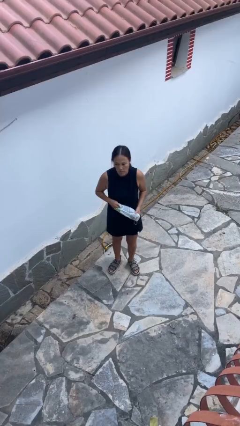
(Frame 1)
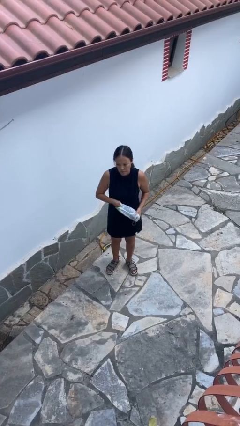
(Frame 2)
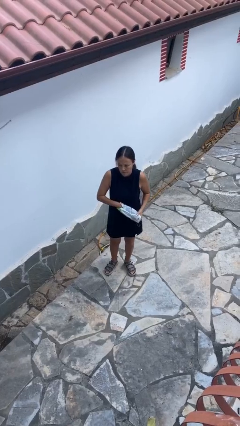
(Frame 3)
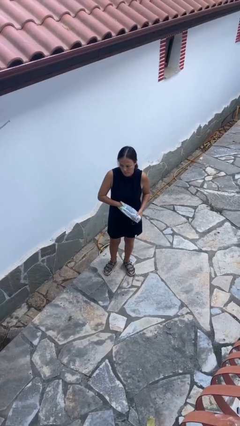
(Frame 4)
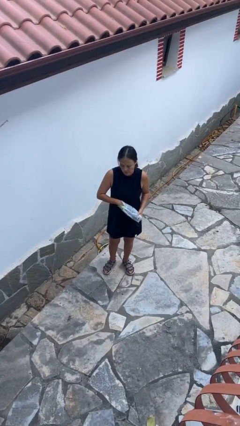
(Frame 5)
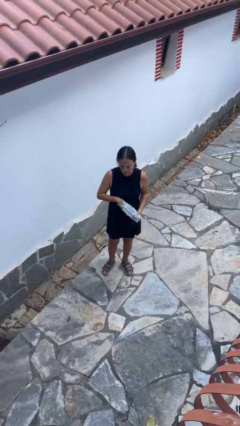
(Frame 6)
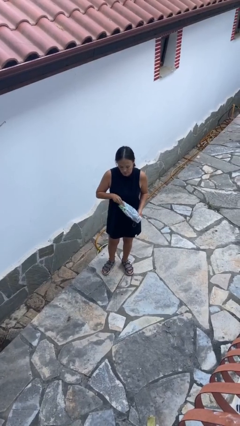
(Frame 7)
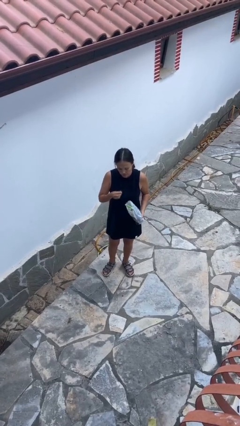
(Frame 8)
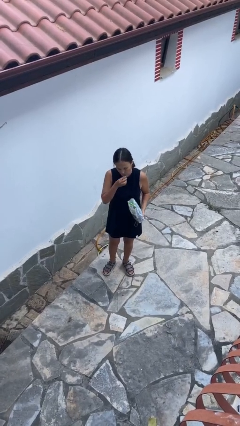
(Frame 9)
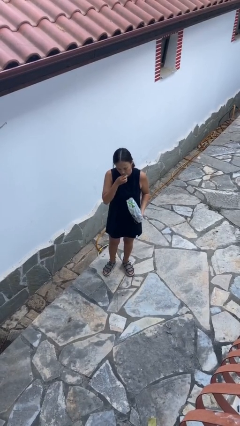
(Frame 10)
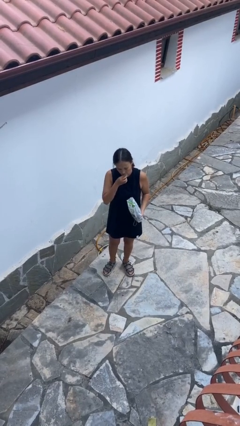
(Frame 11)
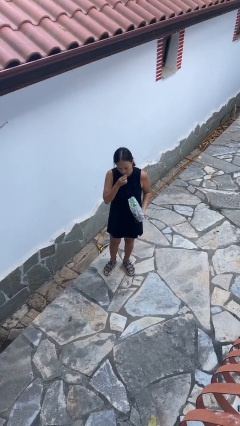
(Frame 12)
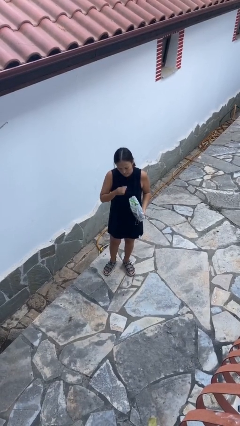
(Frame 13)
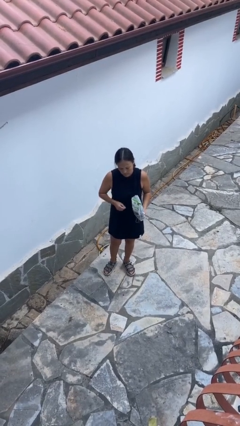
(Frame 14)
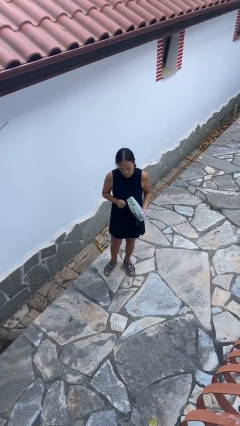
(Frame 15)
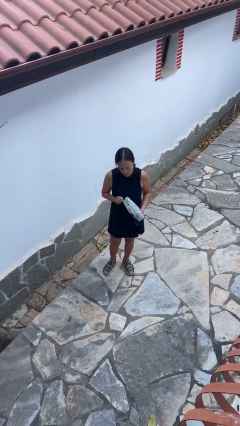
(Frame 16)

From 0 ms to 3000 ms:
person eats snack from bag

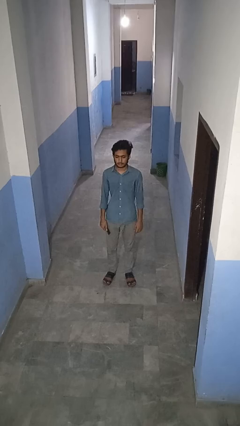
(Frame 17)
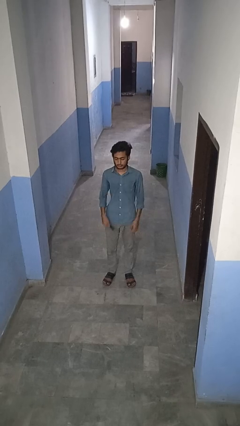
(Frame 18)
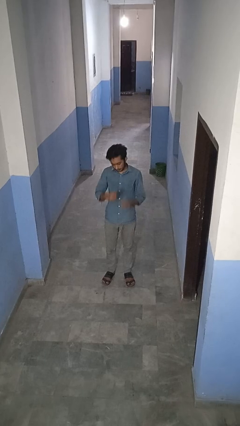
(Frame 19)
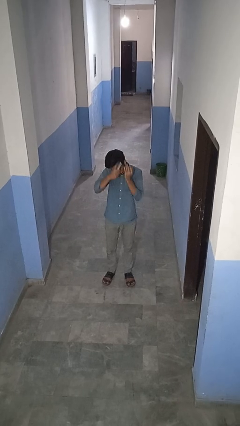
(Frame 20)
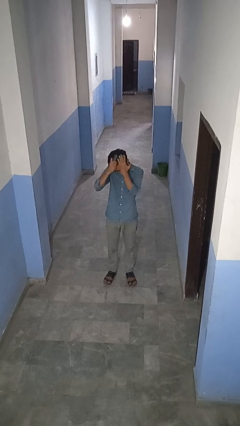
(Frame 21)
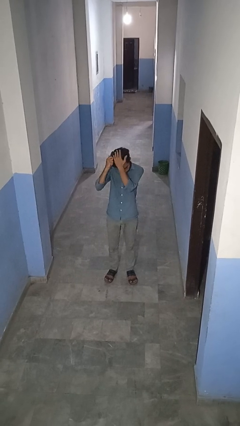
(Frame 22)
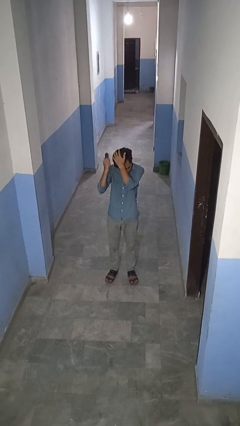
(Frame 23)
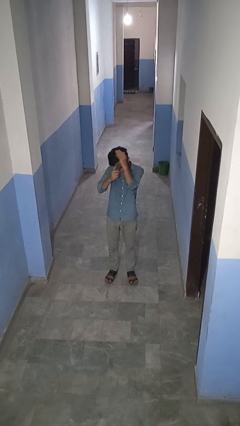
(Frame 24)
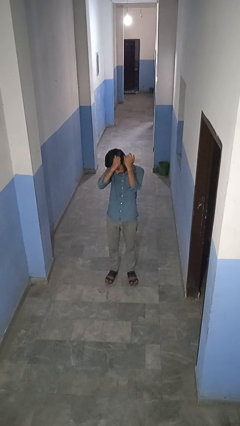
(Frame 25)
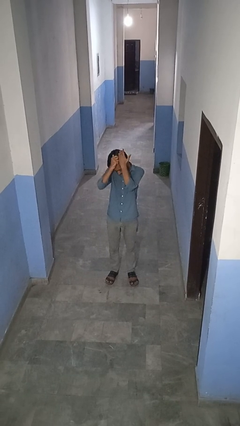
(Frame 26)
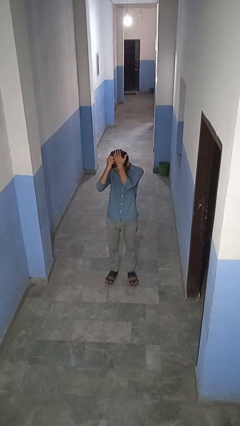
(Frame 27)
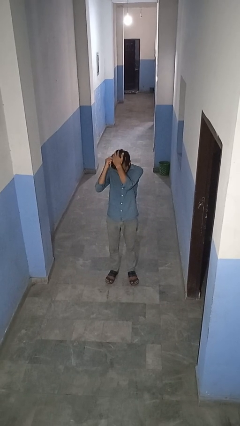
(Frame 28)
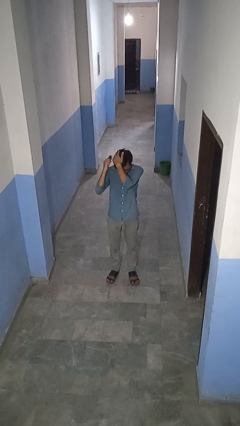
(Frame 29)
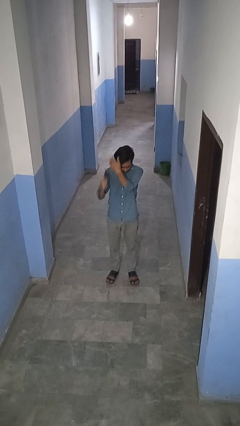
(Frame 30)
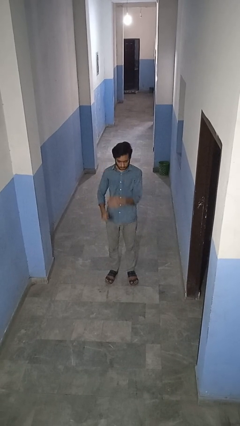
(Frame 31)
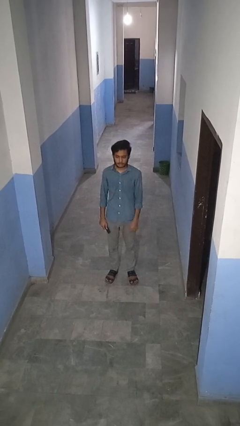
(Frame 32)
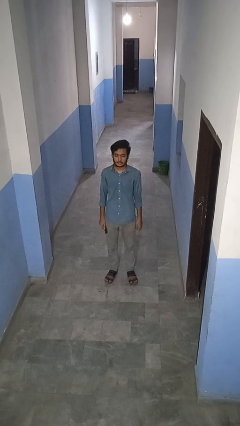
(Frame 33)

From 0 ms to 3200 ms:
person brushes hair

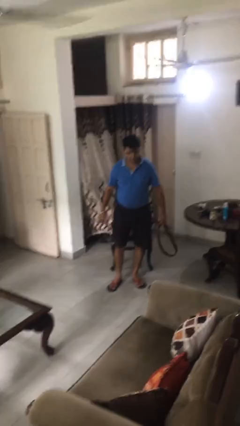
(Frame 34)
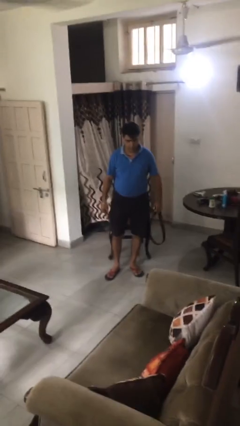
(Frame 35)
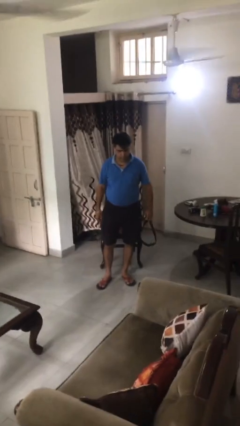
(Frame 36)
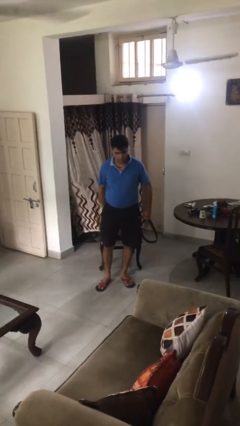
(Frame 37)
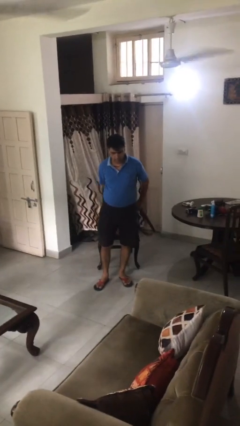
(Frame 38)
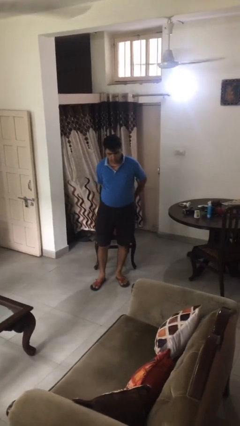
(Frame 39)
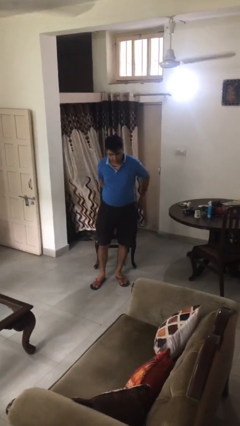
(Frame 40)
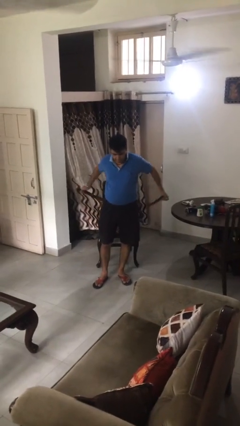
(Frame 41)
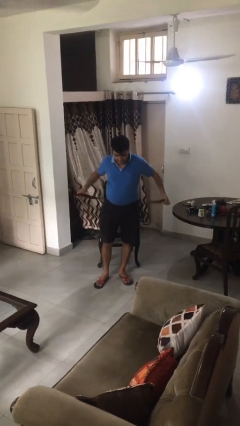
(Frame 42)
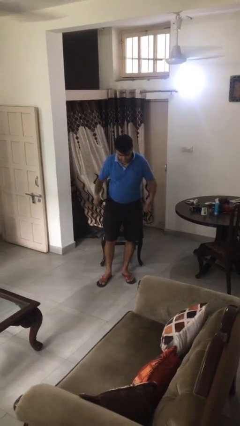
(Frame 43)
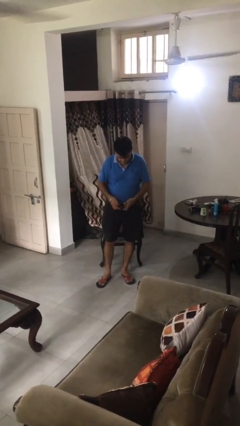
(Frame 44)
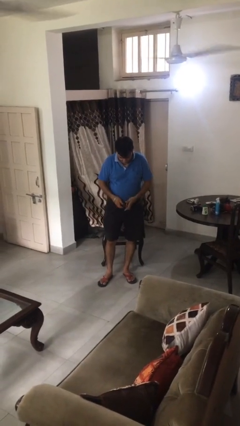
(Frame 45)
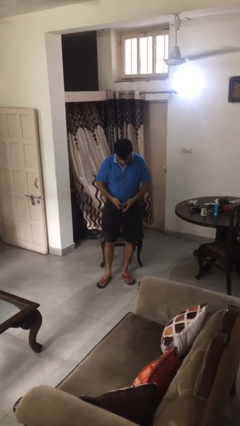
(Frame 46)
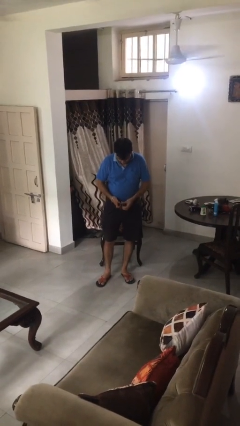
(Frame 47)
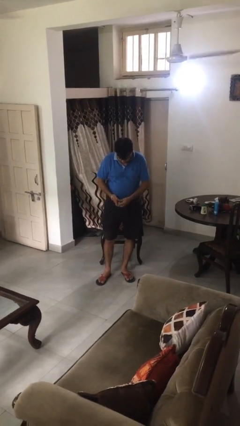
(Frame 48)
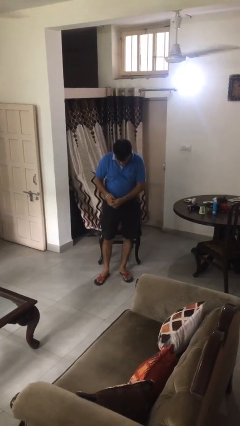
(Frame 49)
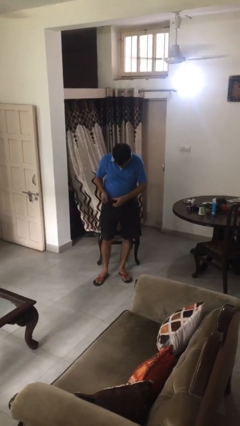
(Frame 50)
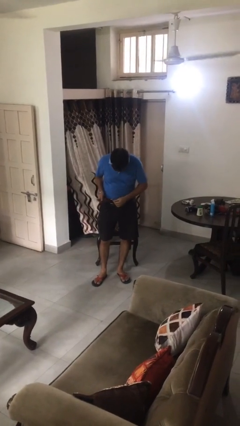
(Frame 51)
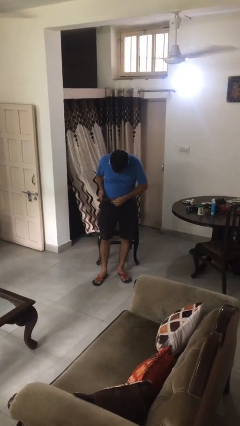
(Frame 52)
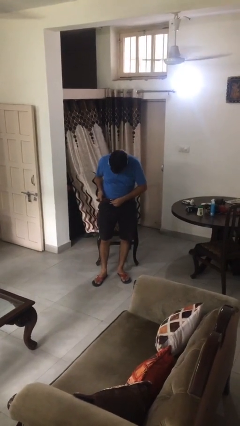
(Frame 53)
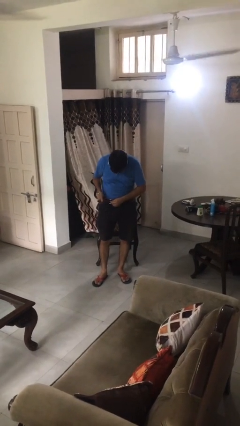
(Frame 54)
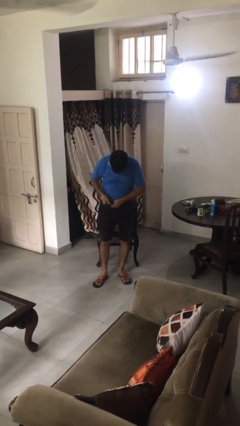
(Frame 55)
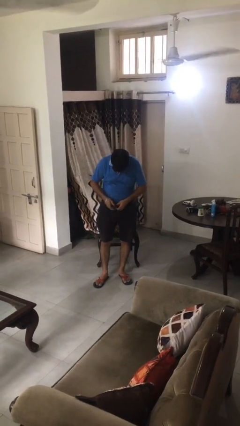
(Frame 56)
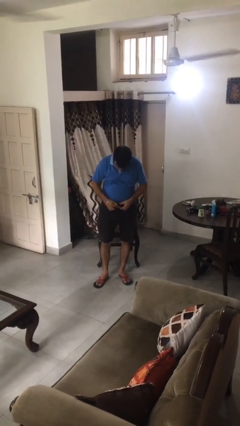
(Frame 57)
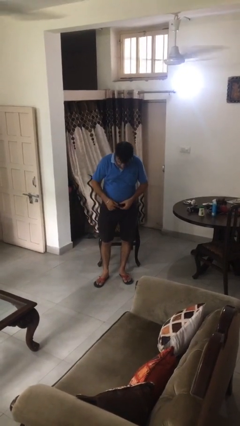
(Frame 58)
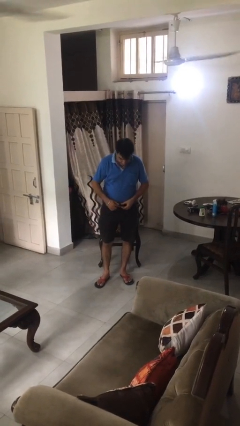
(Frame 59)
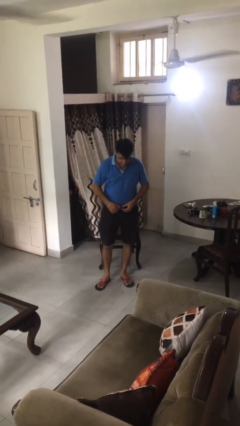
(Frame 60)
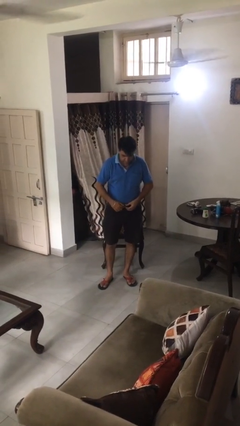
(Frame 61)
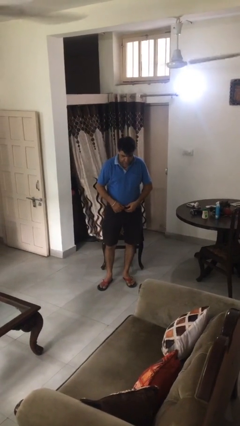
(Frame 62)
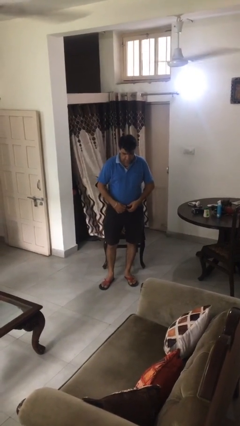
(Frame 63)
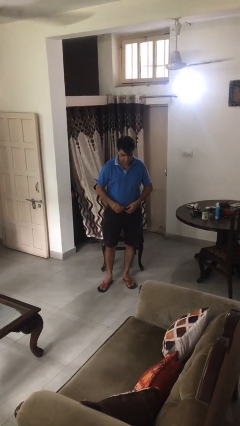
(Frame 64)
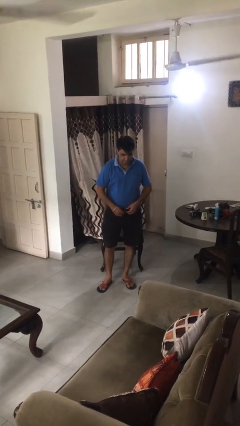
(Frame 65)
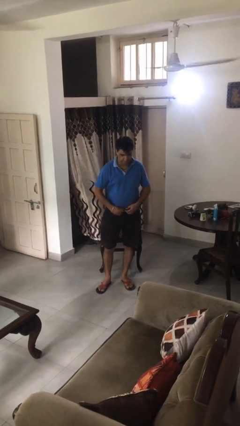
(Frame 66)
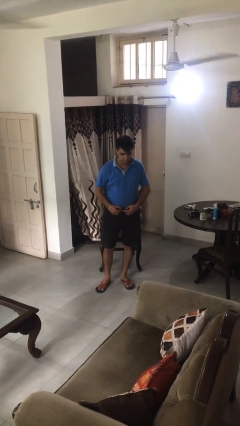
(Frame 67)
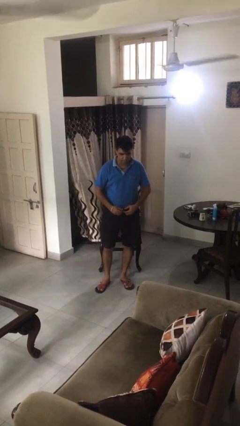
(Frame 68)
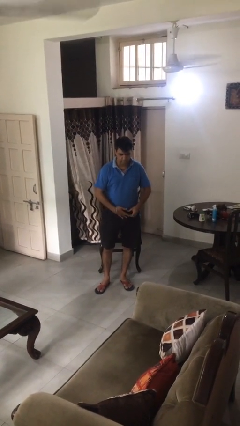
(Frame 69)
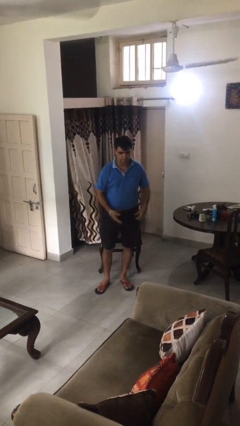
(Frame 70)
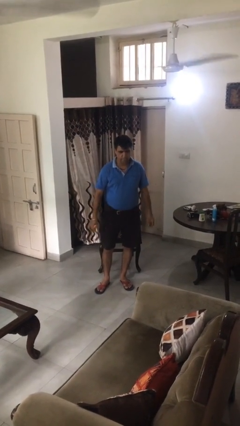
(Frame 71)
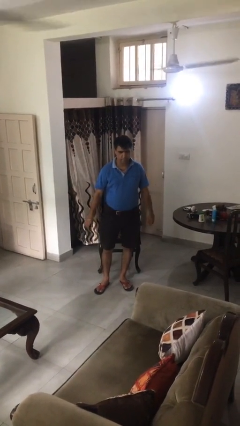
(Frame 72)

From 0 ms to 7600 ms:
person puts on belt

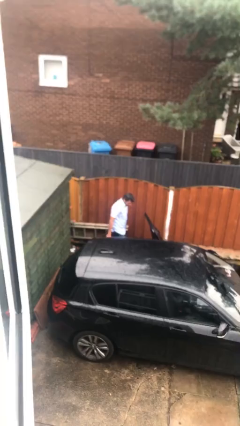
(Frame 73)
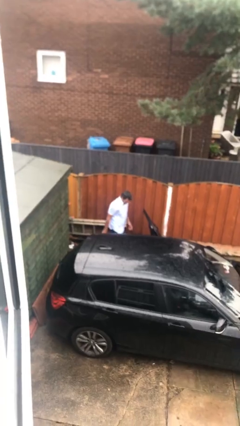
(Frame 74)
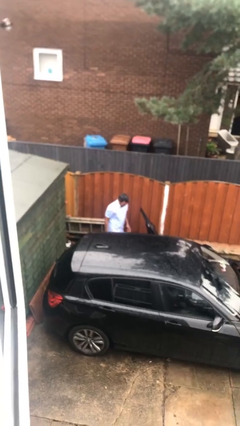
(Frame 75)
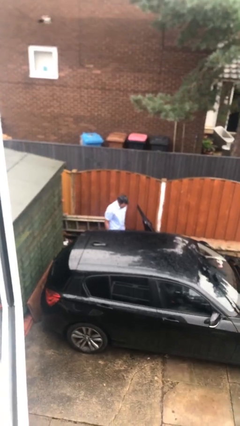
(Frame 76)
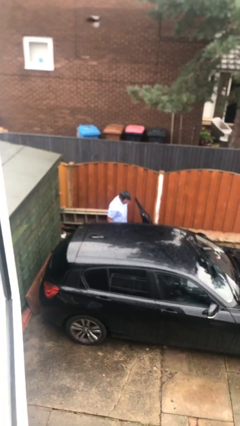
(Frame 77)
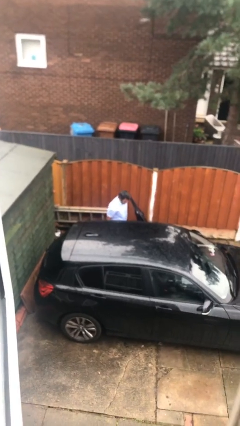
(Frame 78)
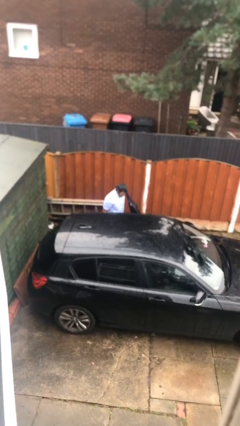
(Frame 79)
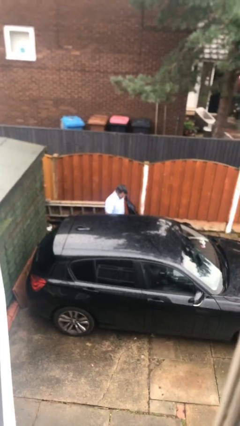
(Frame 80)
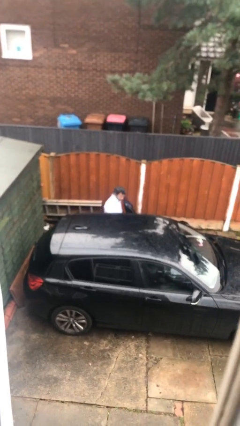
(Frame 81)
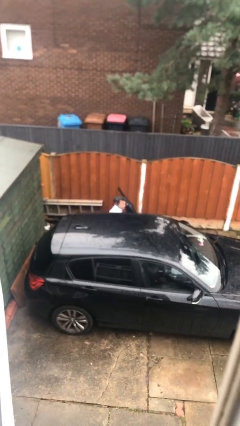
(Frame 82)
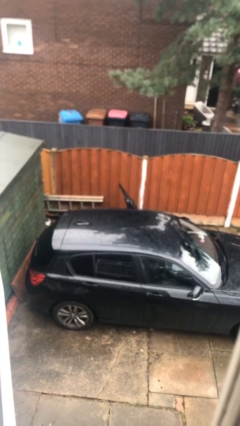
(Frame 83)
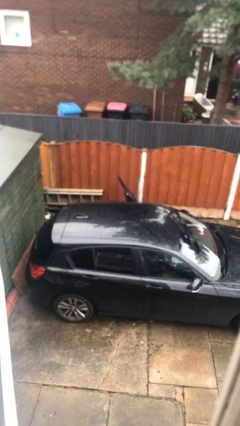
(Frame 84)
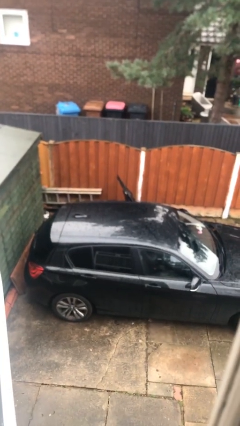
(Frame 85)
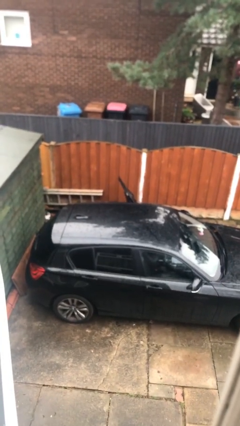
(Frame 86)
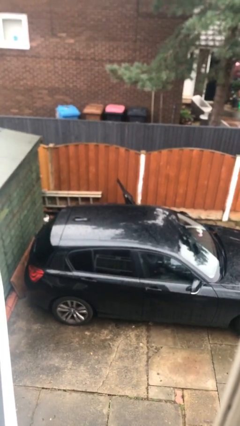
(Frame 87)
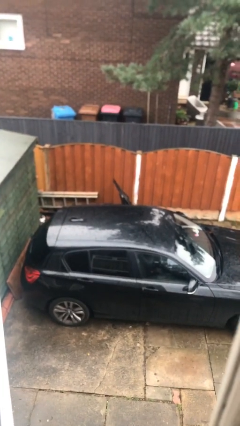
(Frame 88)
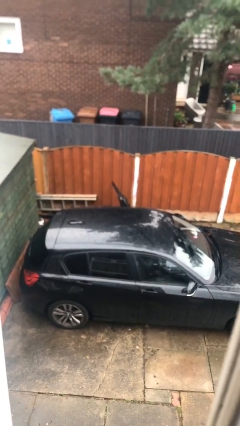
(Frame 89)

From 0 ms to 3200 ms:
person enters car

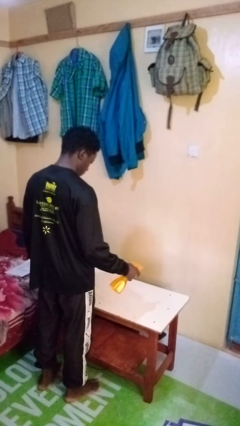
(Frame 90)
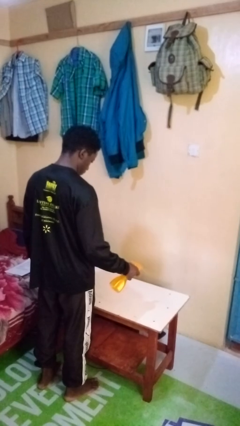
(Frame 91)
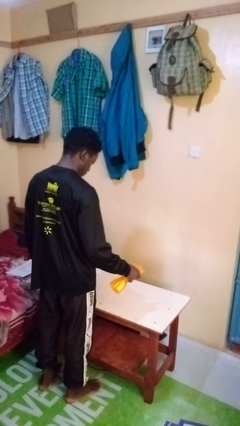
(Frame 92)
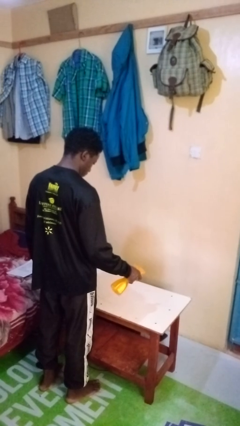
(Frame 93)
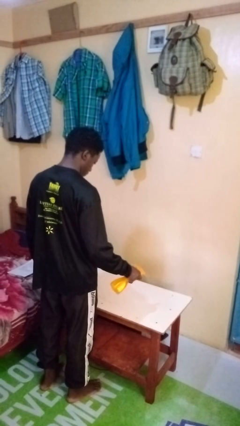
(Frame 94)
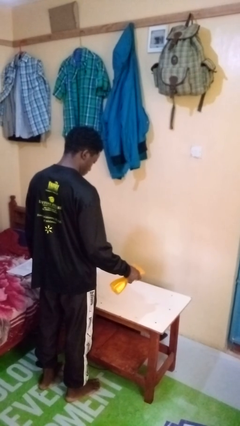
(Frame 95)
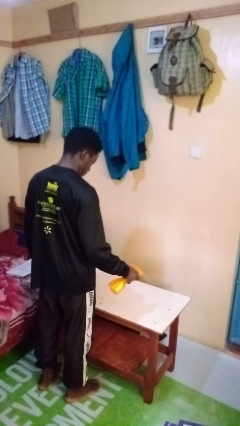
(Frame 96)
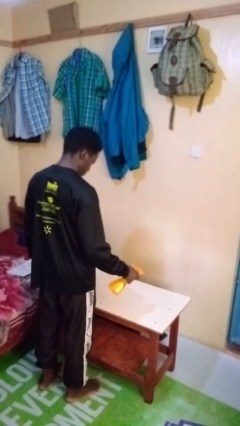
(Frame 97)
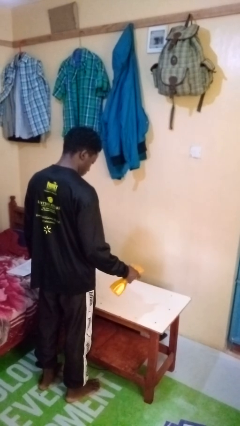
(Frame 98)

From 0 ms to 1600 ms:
person sprays from bottle
